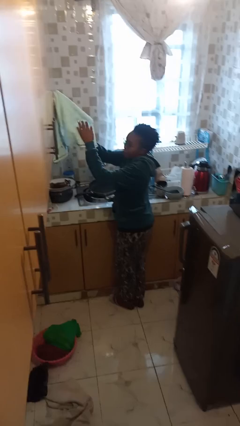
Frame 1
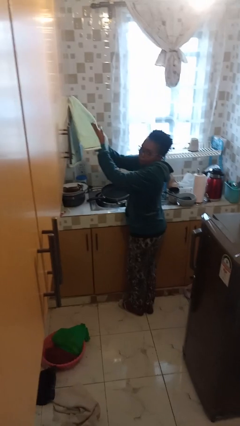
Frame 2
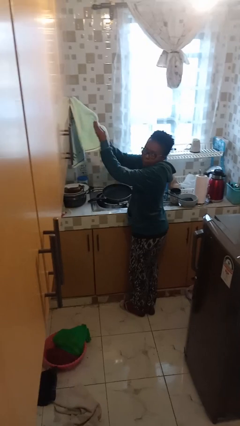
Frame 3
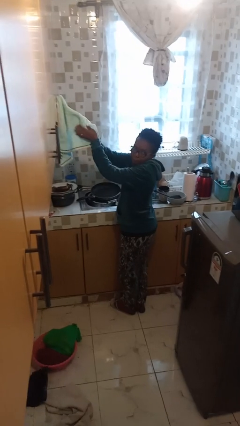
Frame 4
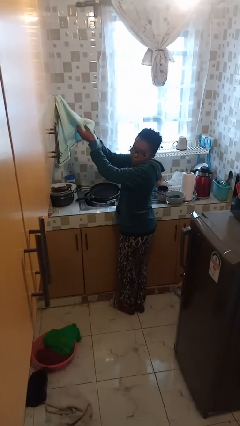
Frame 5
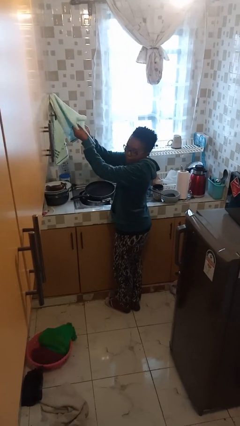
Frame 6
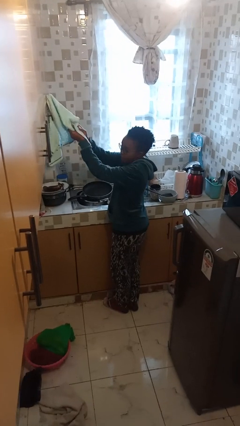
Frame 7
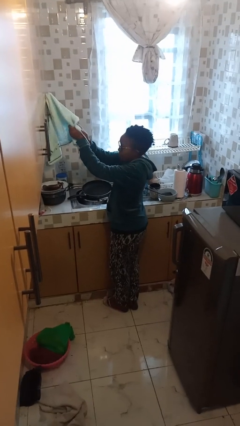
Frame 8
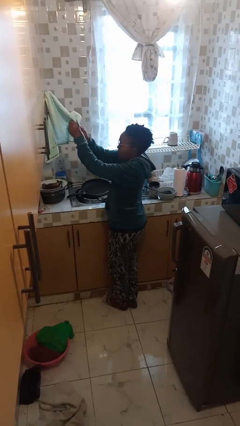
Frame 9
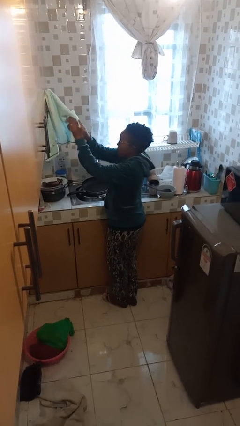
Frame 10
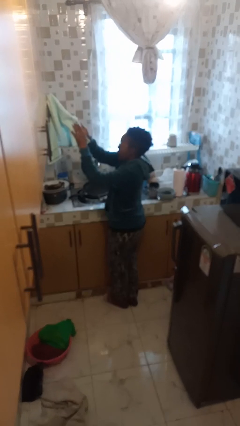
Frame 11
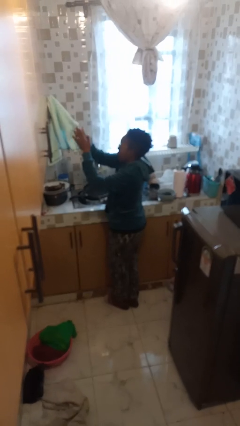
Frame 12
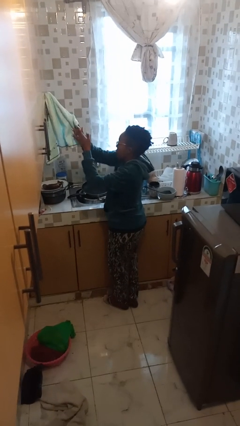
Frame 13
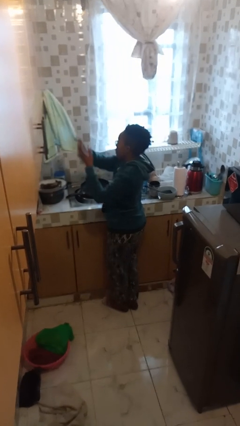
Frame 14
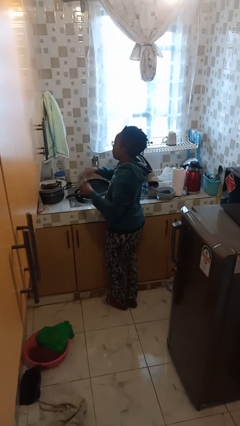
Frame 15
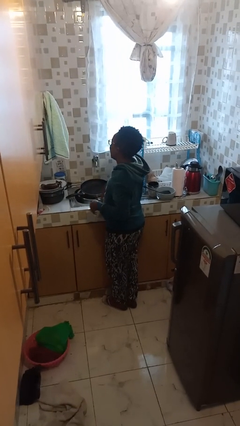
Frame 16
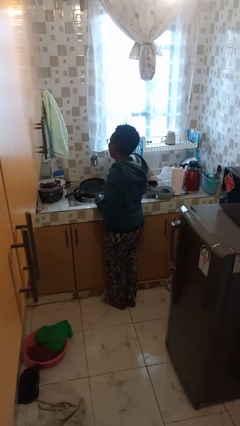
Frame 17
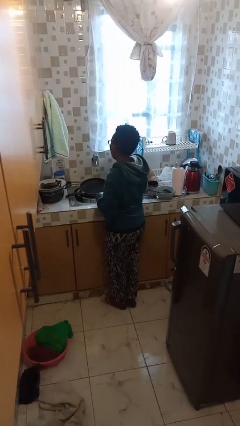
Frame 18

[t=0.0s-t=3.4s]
person dries hands with towel

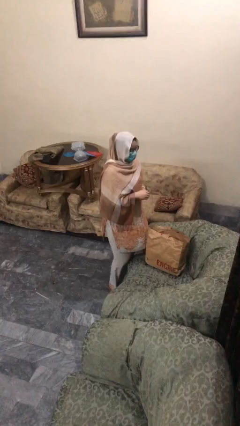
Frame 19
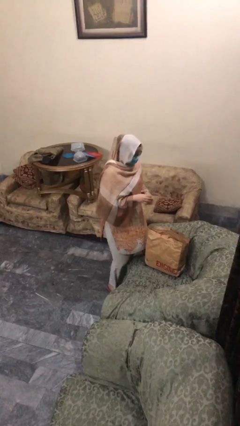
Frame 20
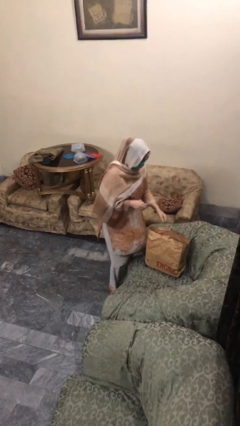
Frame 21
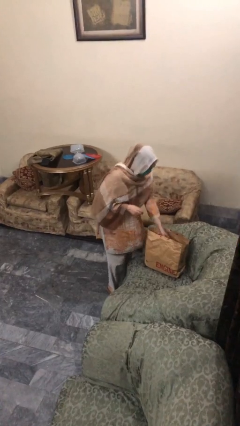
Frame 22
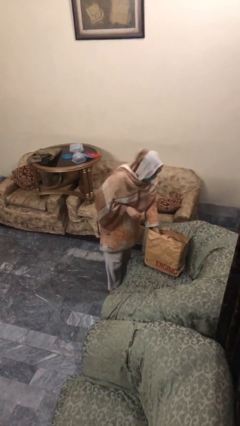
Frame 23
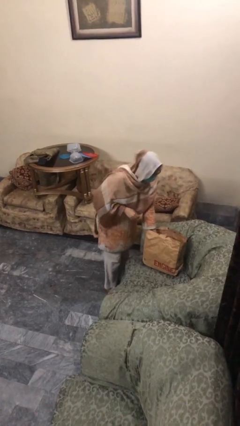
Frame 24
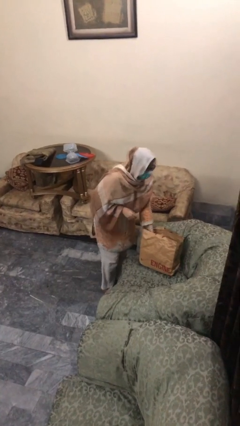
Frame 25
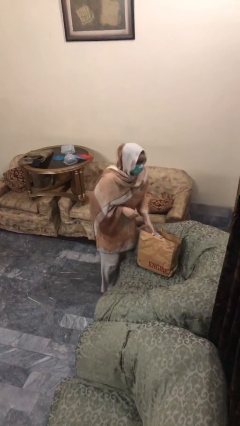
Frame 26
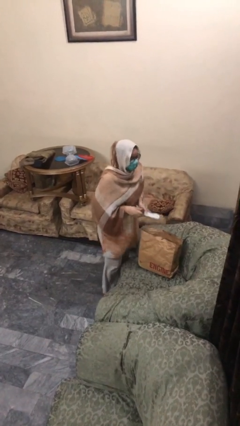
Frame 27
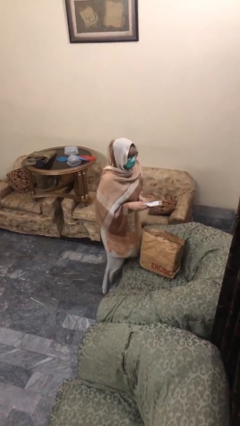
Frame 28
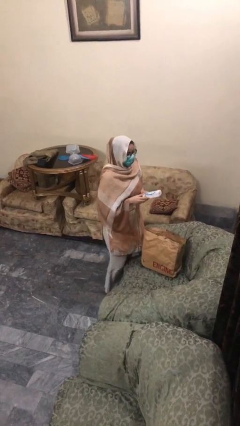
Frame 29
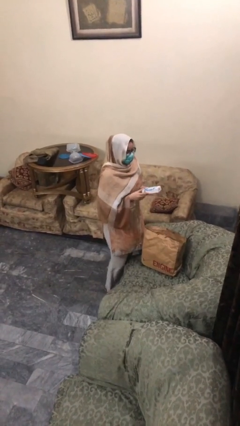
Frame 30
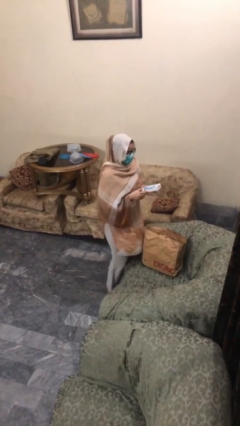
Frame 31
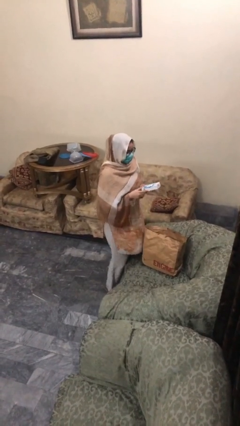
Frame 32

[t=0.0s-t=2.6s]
person takes object from bag

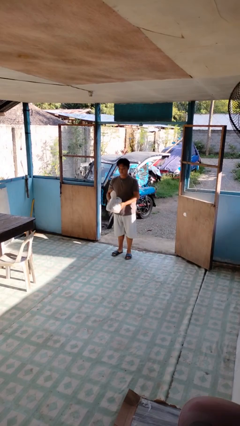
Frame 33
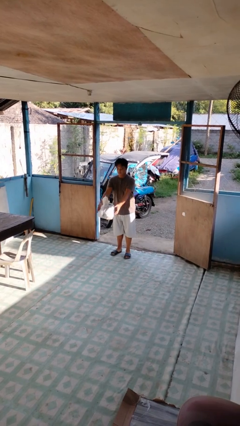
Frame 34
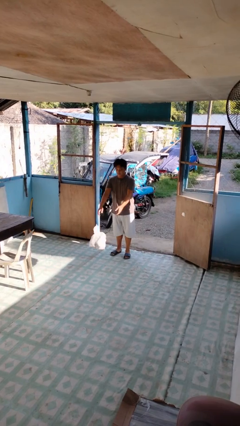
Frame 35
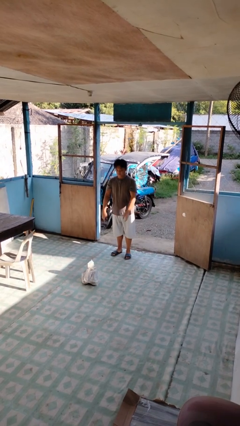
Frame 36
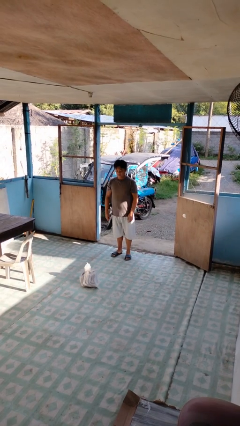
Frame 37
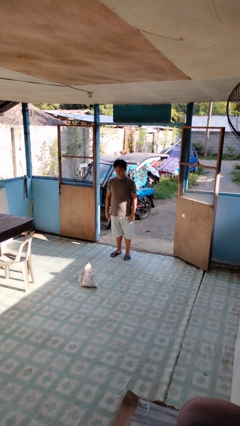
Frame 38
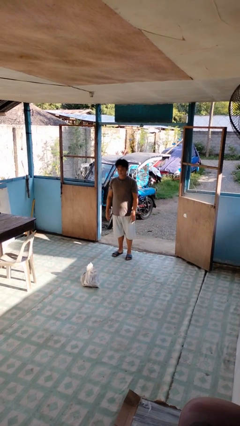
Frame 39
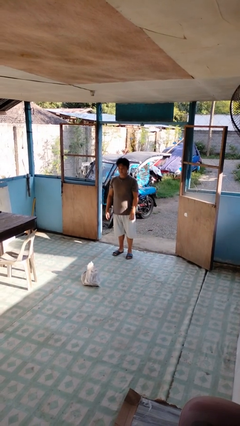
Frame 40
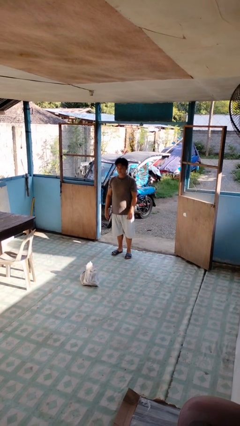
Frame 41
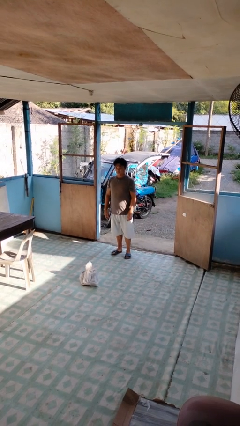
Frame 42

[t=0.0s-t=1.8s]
person throws object to ground

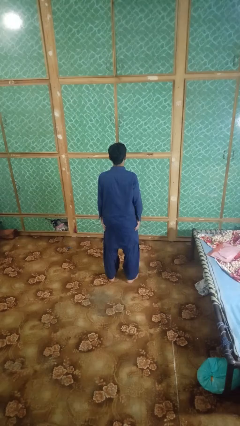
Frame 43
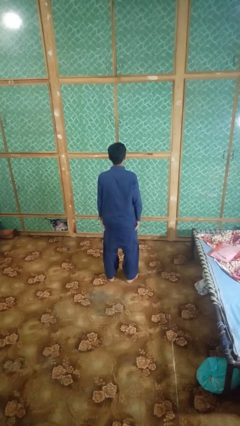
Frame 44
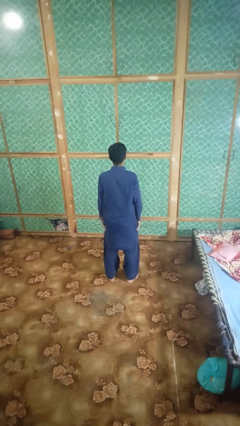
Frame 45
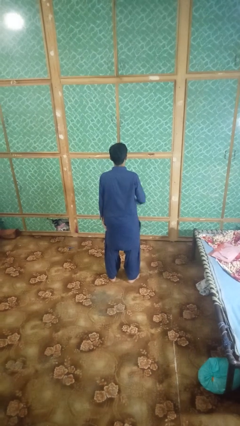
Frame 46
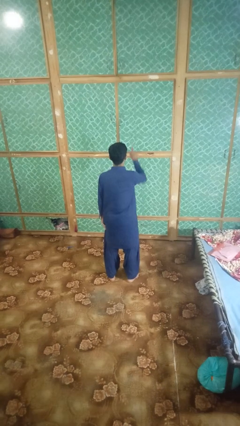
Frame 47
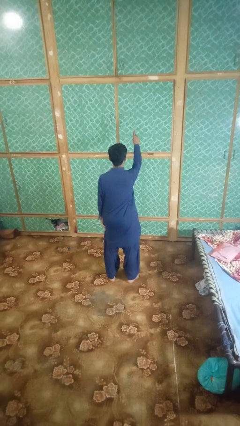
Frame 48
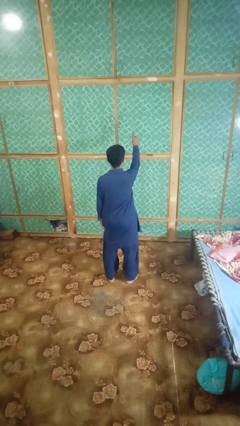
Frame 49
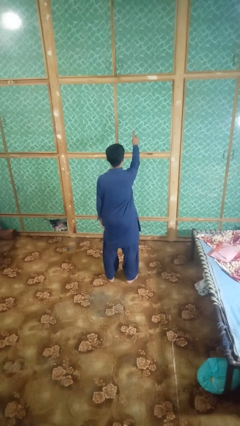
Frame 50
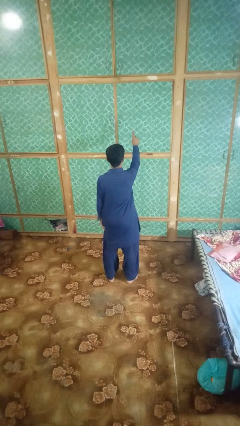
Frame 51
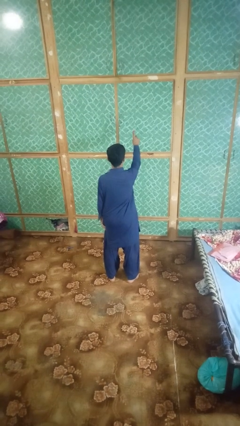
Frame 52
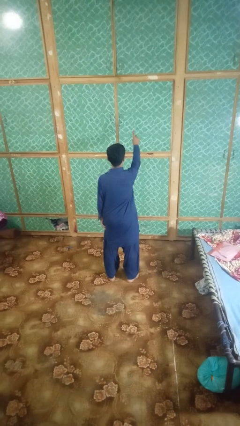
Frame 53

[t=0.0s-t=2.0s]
person gestures number one

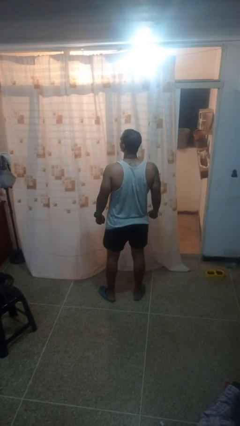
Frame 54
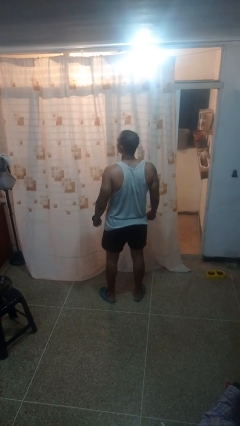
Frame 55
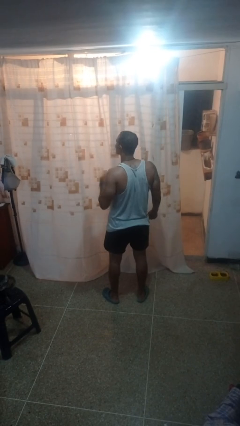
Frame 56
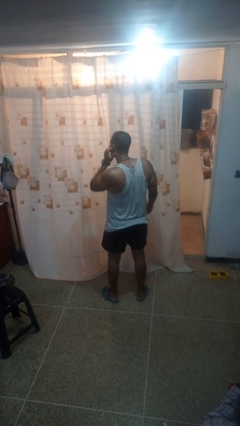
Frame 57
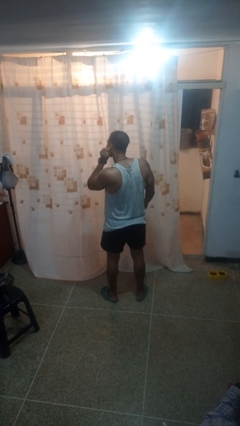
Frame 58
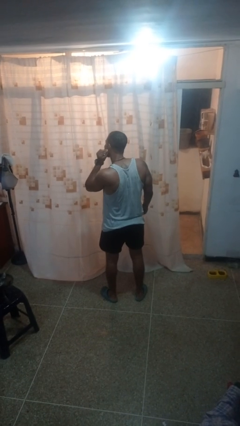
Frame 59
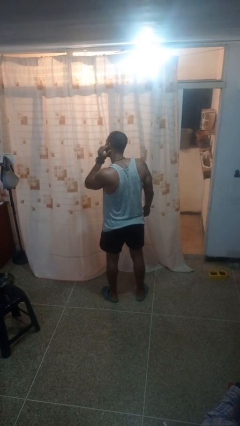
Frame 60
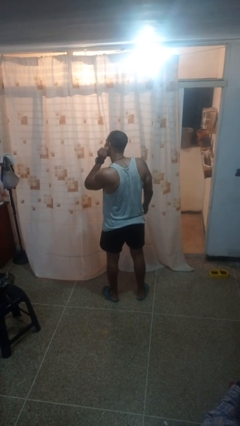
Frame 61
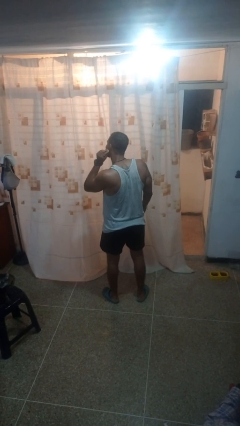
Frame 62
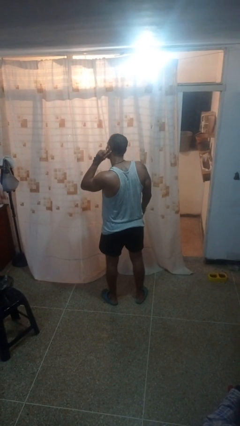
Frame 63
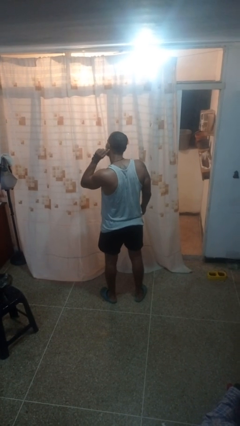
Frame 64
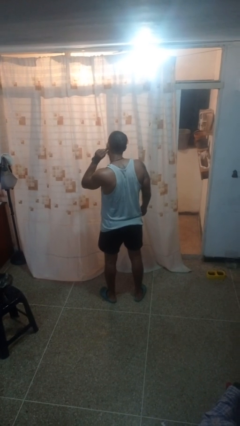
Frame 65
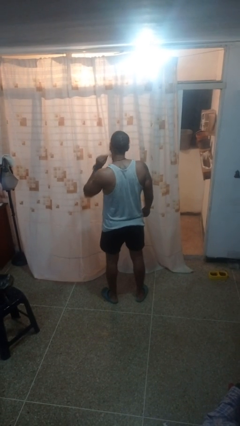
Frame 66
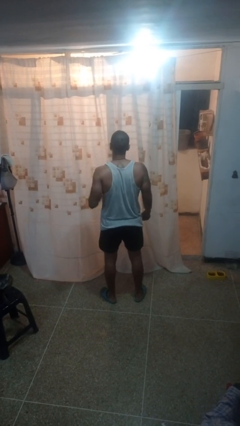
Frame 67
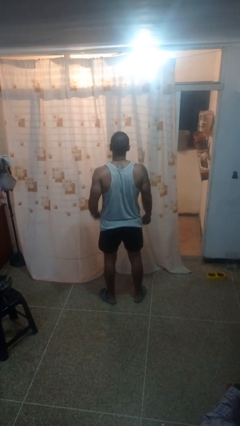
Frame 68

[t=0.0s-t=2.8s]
person touches earlobe

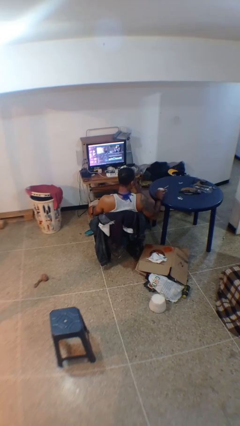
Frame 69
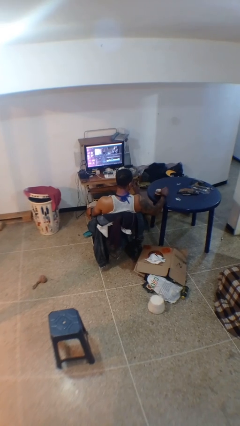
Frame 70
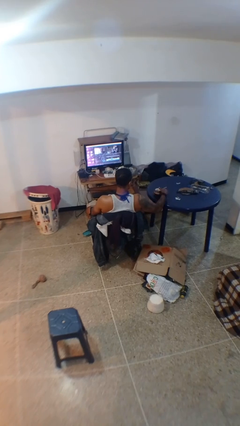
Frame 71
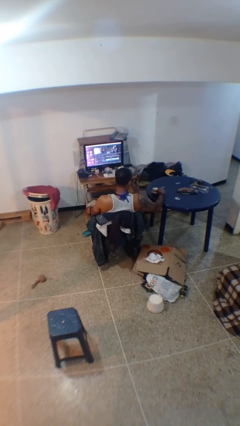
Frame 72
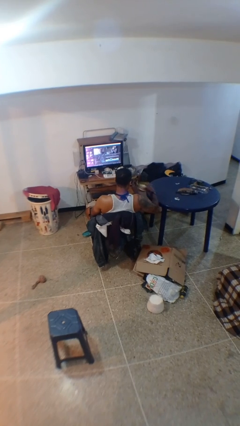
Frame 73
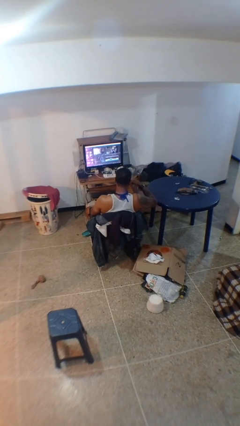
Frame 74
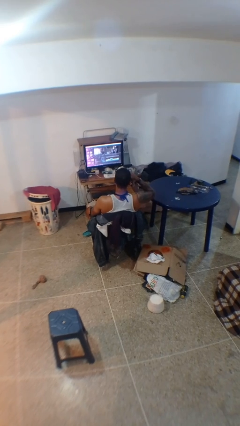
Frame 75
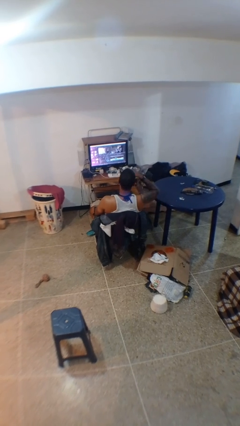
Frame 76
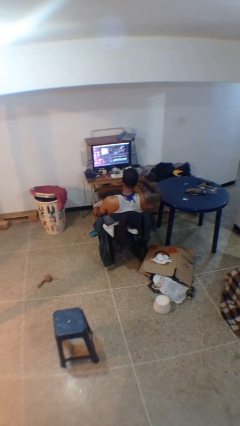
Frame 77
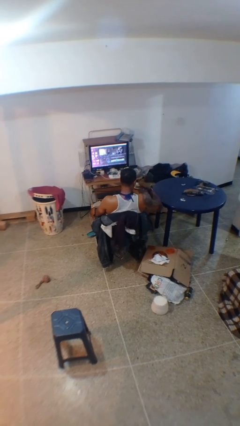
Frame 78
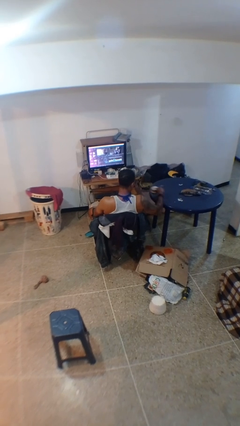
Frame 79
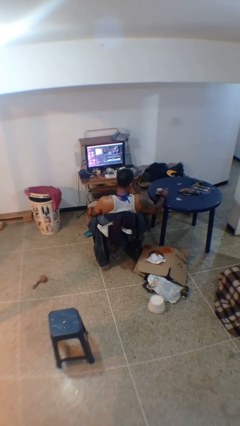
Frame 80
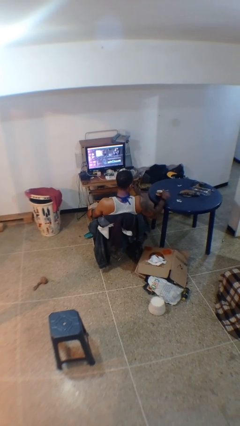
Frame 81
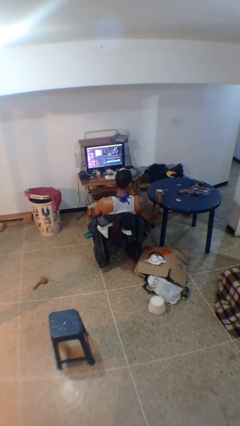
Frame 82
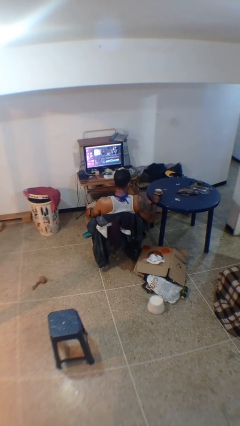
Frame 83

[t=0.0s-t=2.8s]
person drinks from mug

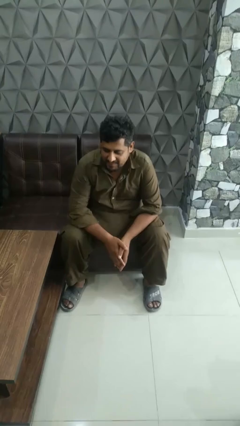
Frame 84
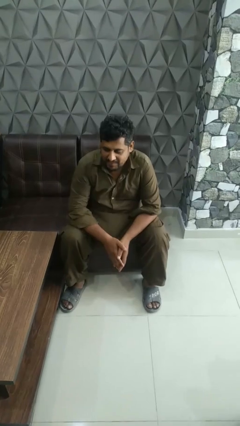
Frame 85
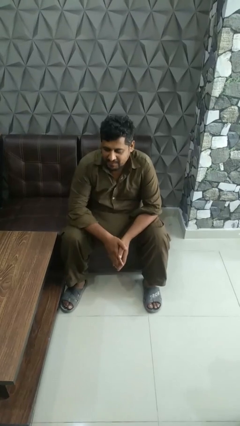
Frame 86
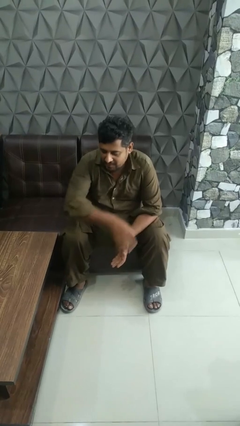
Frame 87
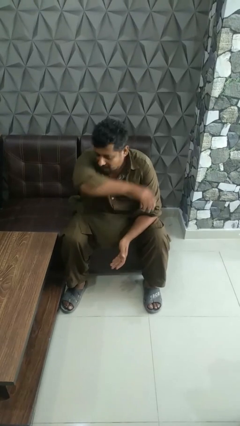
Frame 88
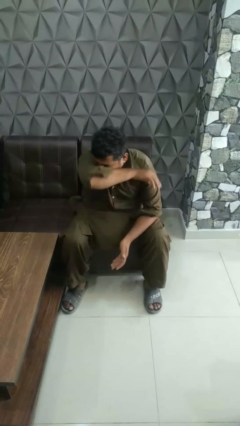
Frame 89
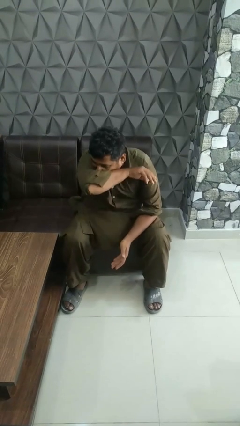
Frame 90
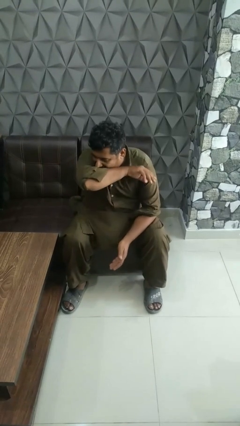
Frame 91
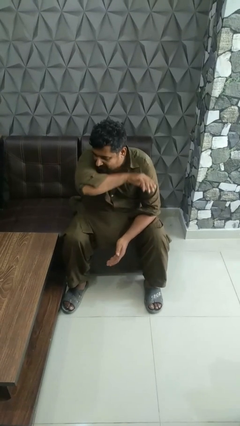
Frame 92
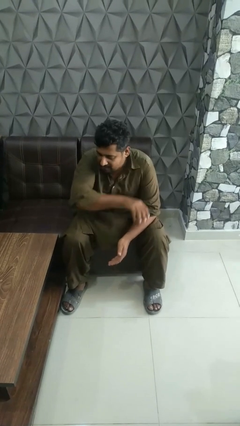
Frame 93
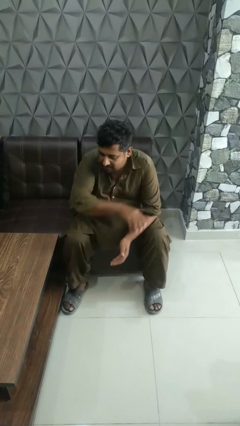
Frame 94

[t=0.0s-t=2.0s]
person sneezes into arm
